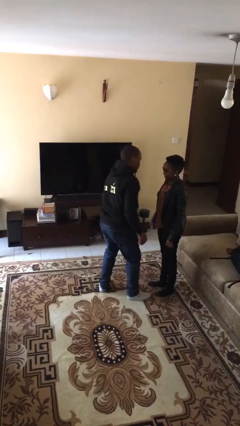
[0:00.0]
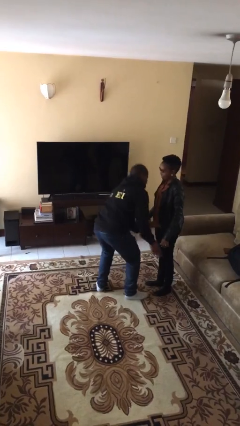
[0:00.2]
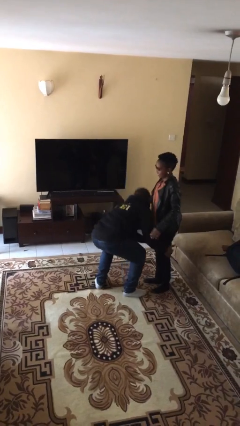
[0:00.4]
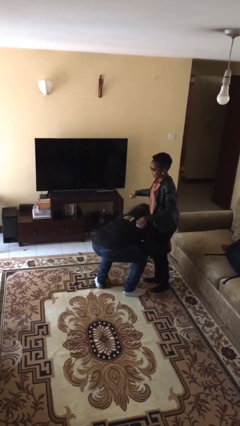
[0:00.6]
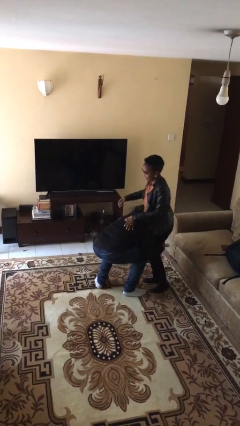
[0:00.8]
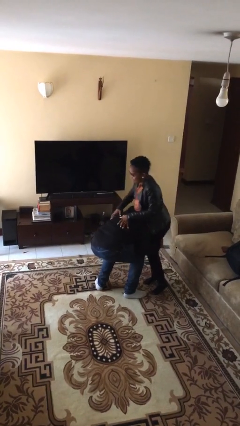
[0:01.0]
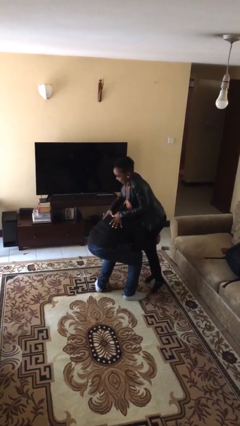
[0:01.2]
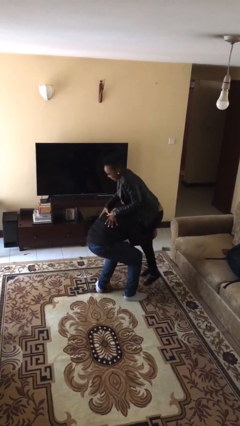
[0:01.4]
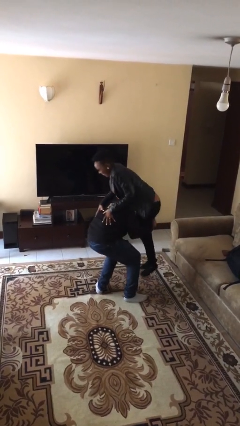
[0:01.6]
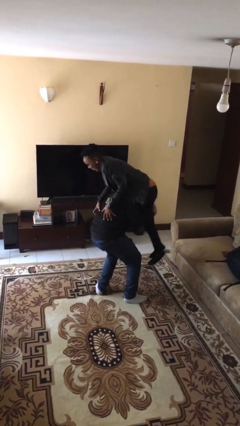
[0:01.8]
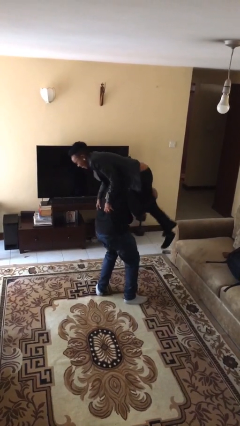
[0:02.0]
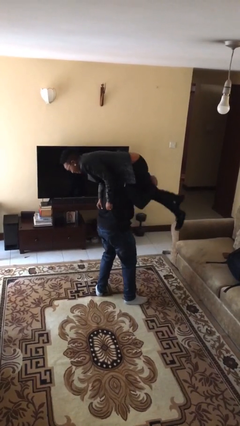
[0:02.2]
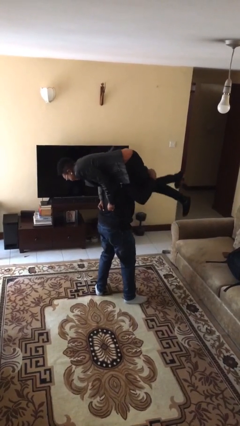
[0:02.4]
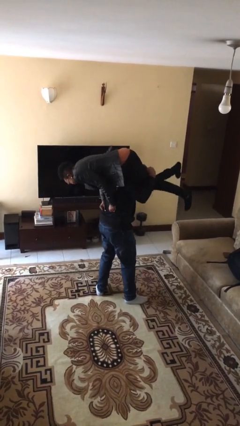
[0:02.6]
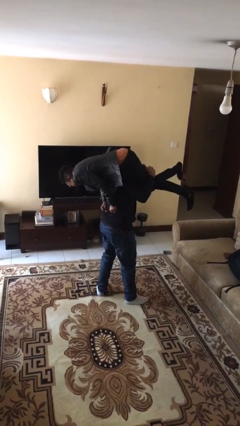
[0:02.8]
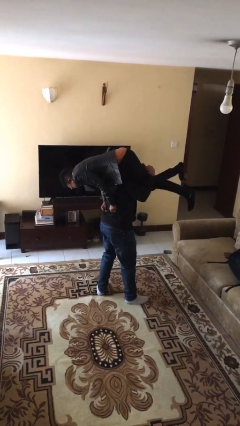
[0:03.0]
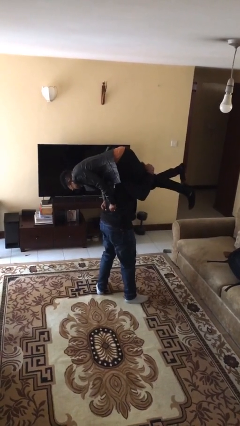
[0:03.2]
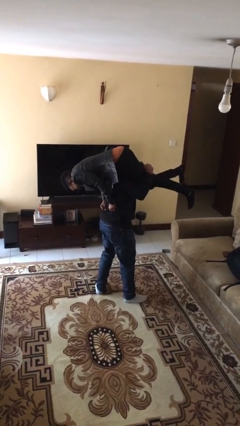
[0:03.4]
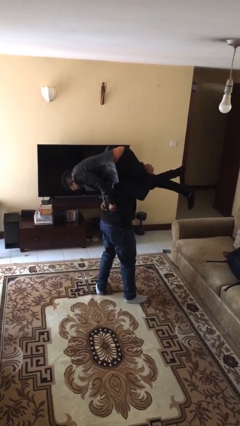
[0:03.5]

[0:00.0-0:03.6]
person carries person over shoulder

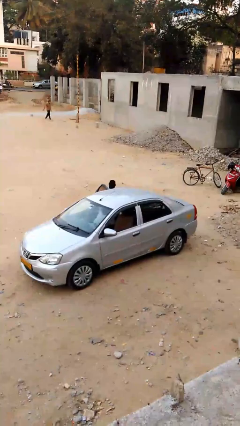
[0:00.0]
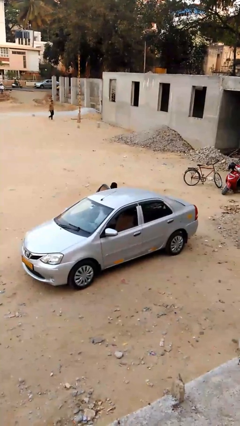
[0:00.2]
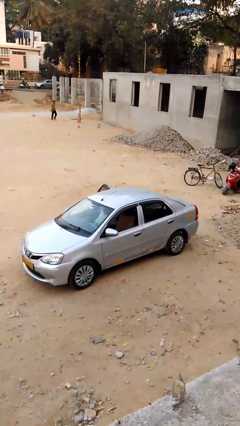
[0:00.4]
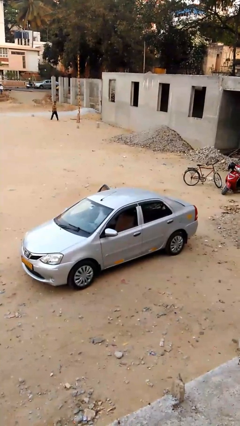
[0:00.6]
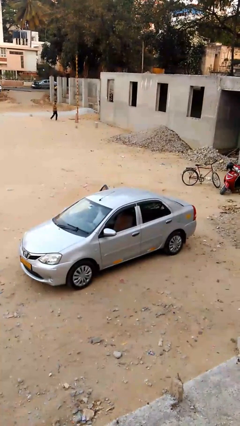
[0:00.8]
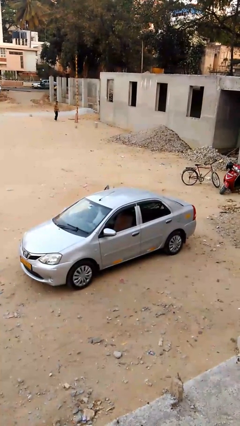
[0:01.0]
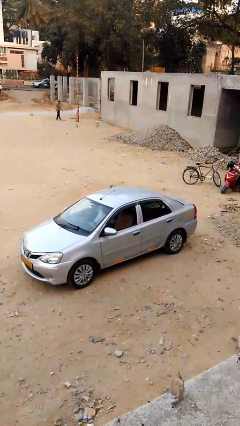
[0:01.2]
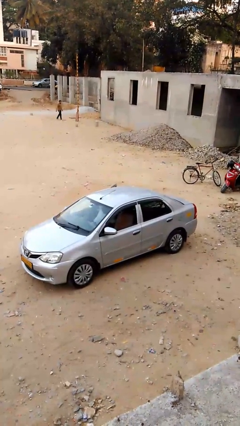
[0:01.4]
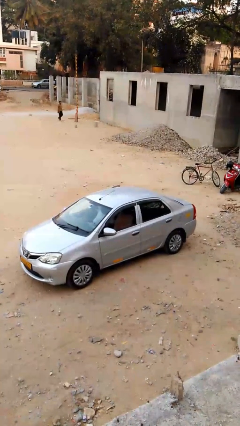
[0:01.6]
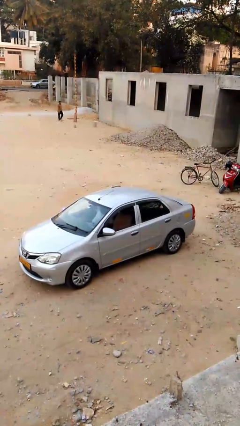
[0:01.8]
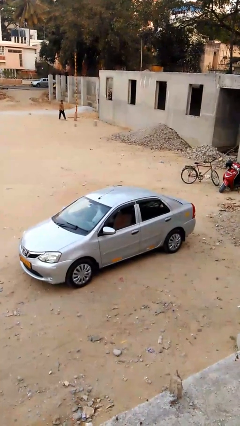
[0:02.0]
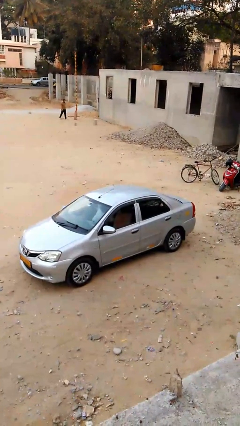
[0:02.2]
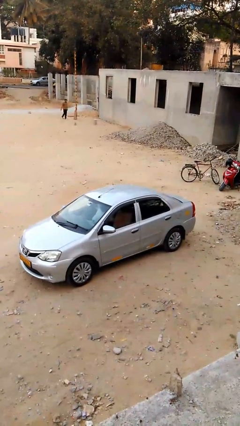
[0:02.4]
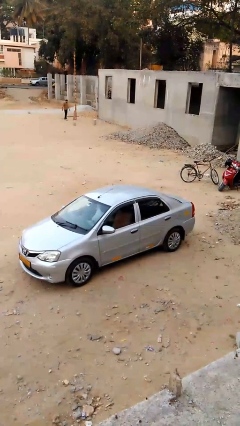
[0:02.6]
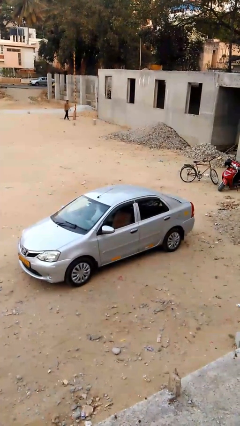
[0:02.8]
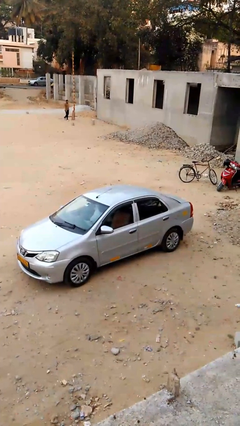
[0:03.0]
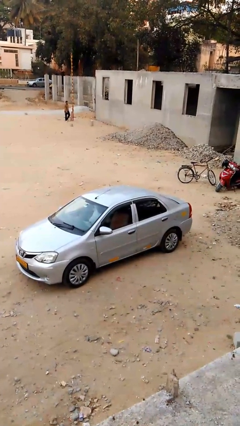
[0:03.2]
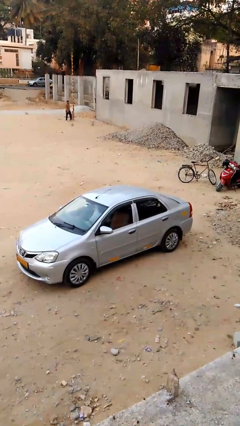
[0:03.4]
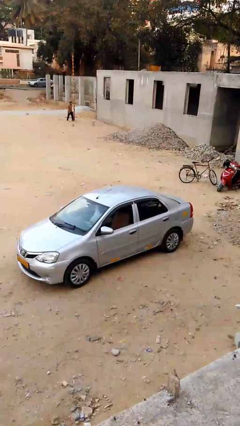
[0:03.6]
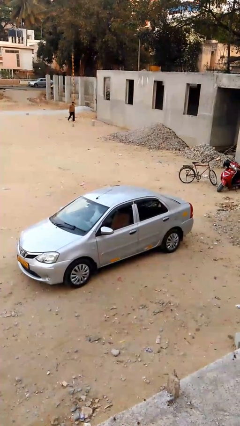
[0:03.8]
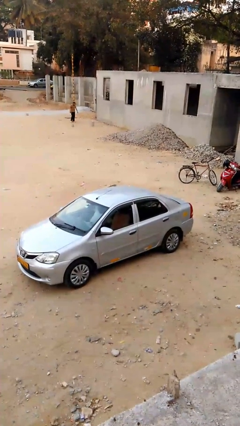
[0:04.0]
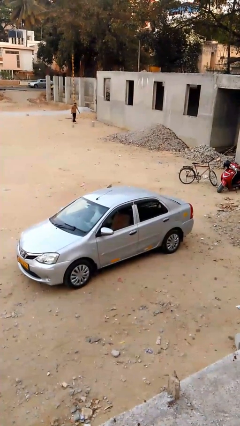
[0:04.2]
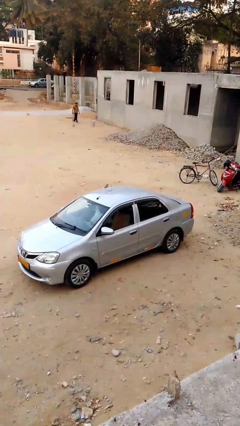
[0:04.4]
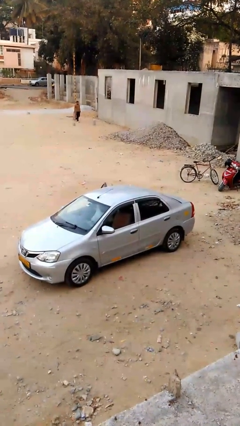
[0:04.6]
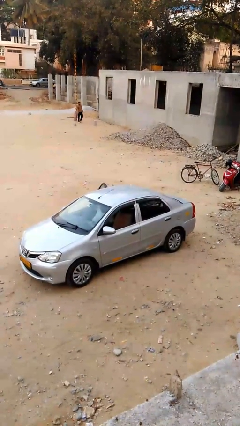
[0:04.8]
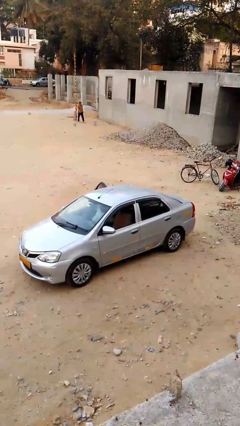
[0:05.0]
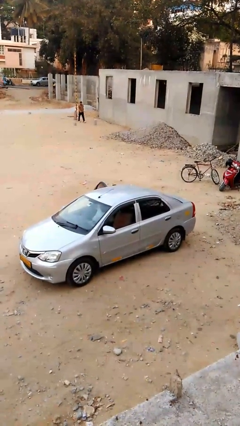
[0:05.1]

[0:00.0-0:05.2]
person enters car

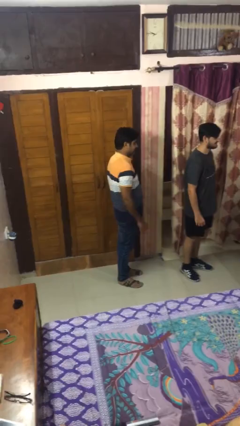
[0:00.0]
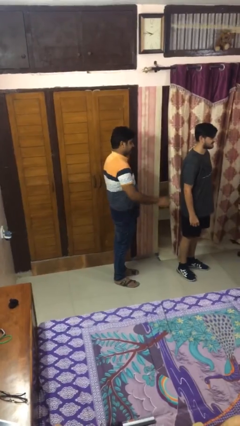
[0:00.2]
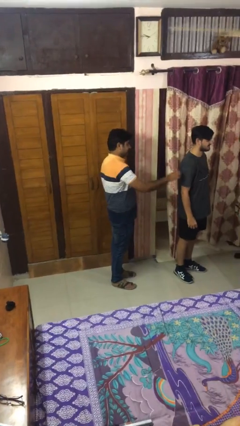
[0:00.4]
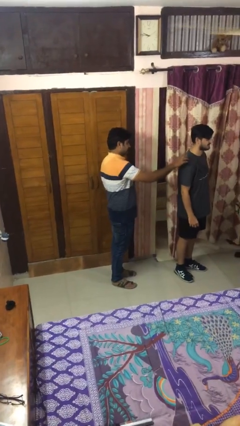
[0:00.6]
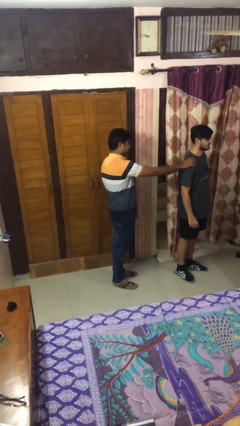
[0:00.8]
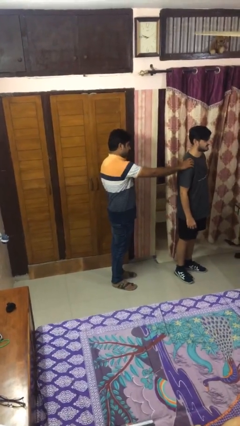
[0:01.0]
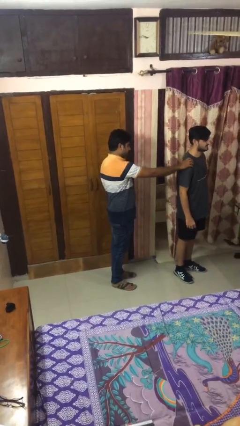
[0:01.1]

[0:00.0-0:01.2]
person grabs person by shoulder

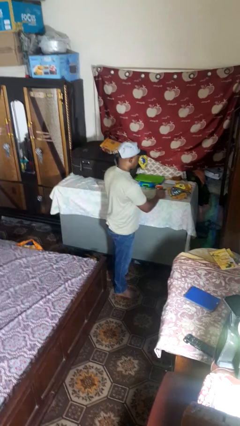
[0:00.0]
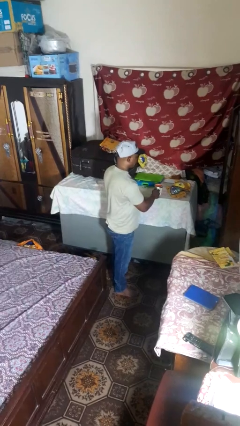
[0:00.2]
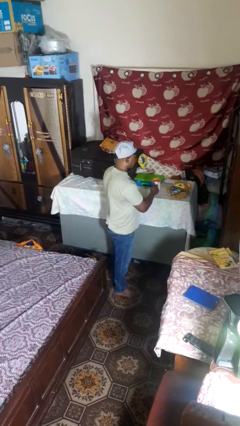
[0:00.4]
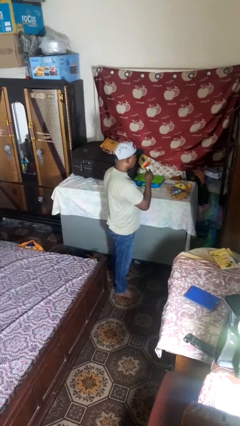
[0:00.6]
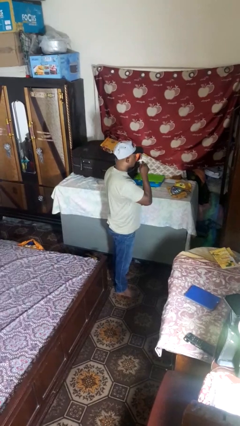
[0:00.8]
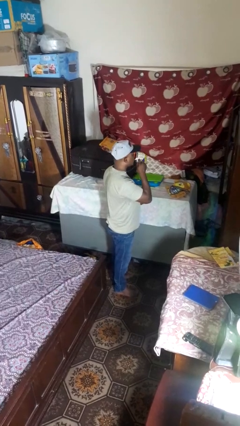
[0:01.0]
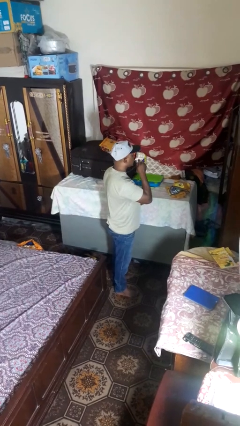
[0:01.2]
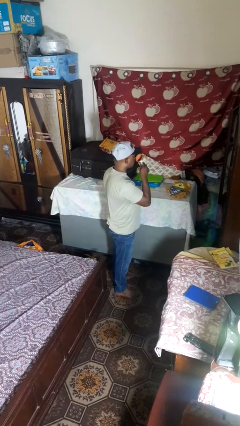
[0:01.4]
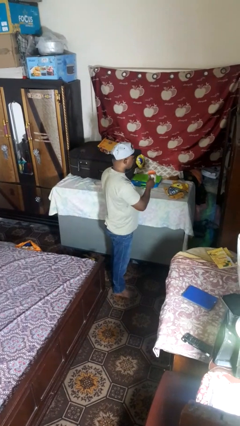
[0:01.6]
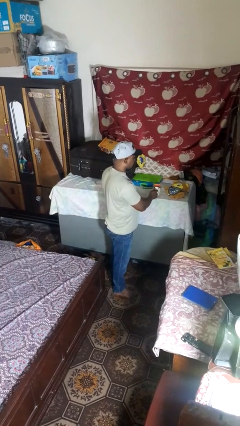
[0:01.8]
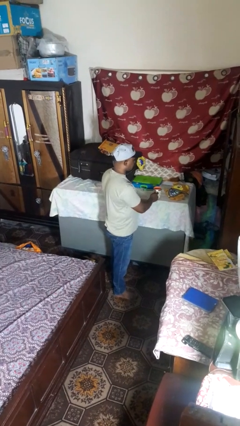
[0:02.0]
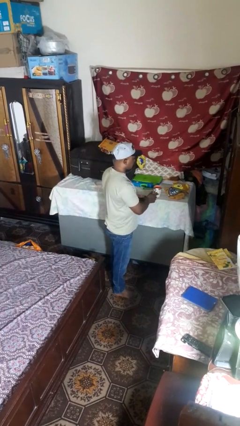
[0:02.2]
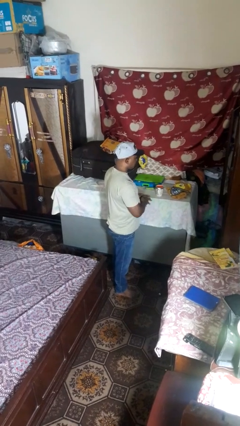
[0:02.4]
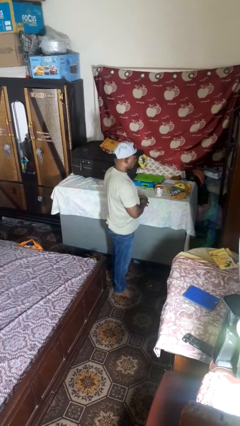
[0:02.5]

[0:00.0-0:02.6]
person drinks from cup

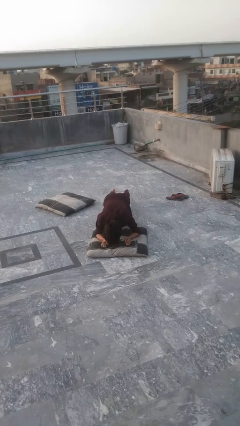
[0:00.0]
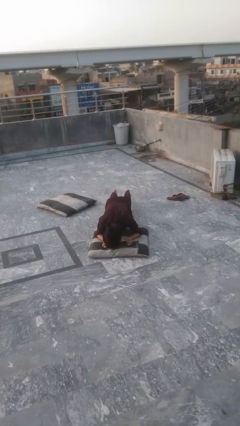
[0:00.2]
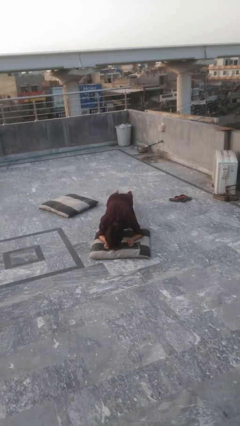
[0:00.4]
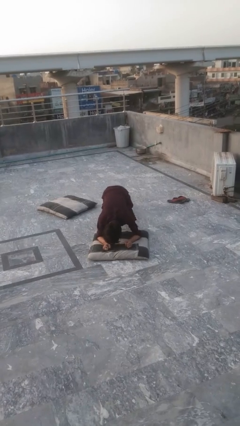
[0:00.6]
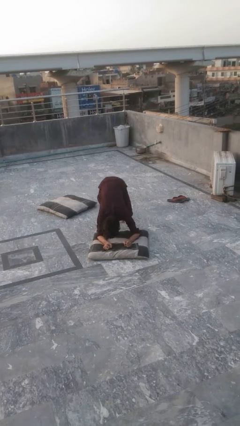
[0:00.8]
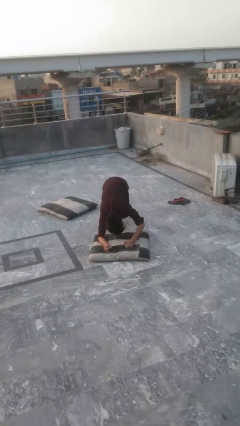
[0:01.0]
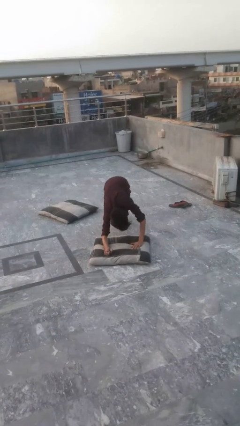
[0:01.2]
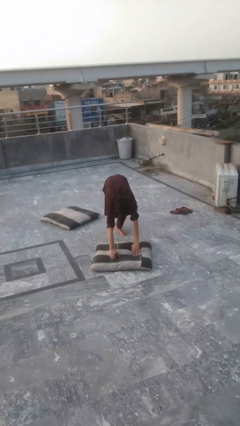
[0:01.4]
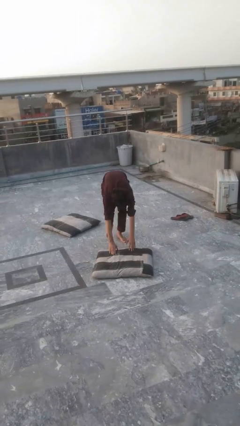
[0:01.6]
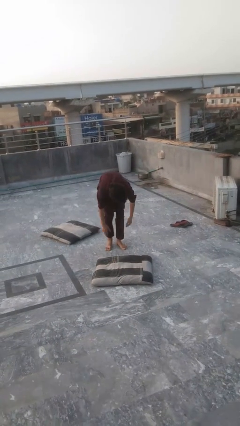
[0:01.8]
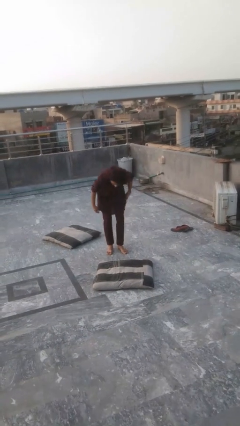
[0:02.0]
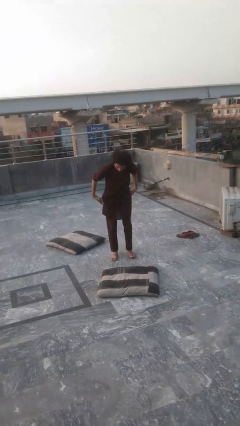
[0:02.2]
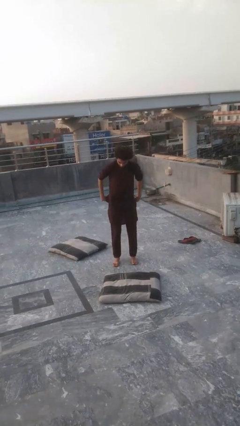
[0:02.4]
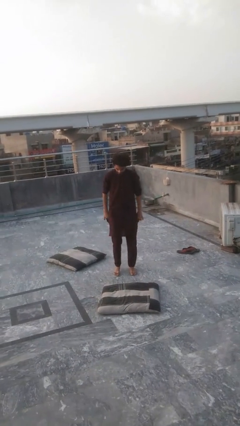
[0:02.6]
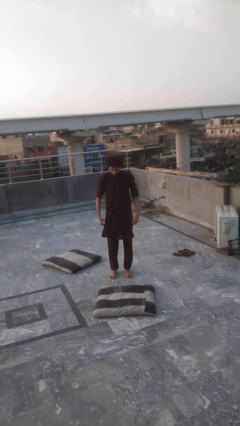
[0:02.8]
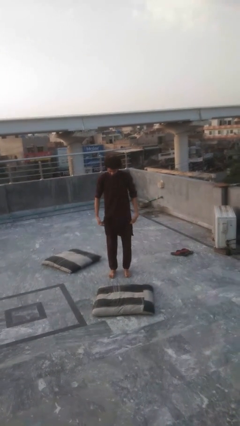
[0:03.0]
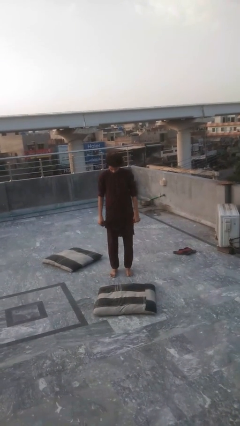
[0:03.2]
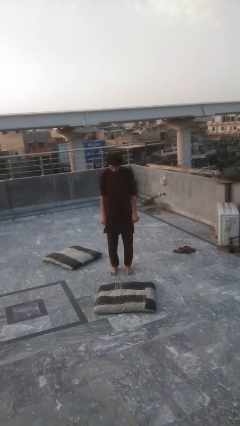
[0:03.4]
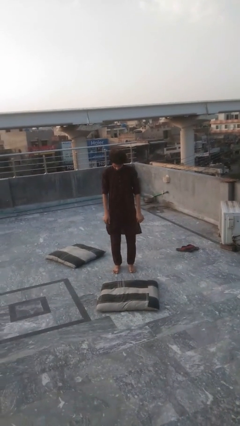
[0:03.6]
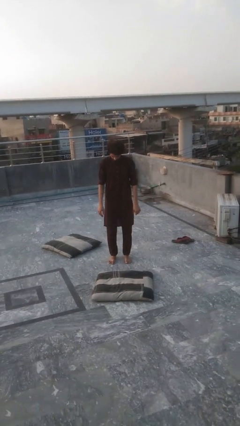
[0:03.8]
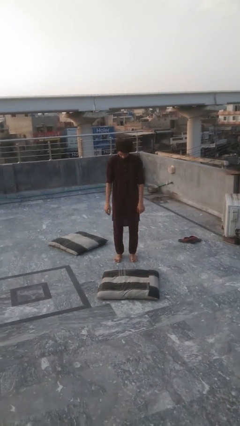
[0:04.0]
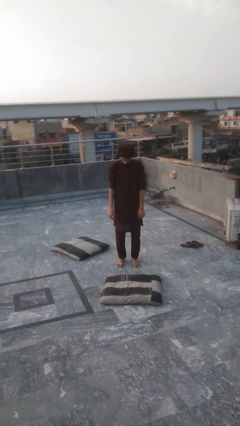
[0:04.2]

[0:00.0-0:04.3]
person stands up from floor

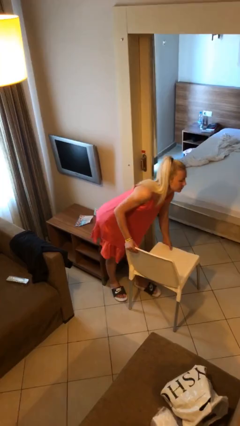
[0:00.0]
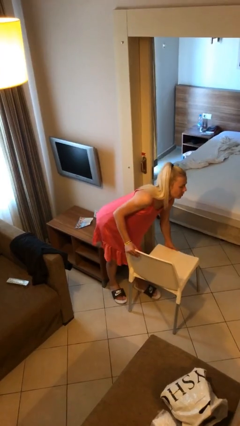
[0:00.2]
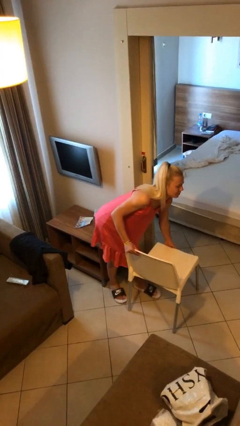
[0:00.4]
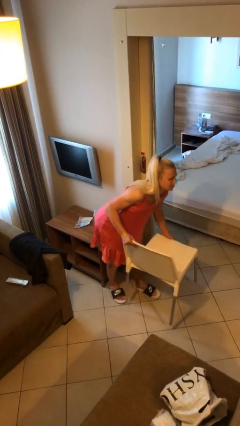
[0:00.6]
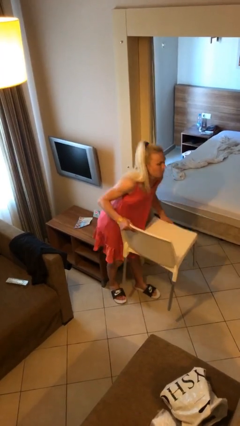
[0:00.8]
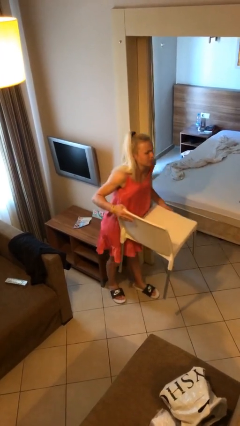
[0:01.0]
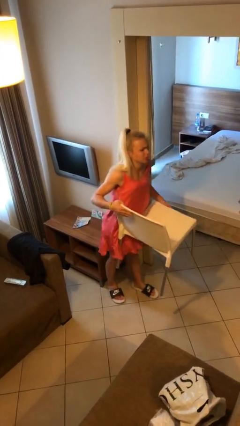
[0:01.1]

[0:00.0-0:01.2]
person picks up object from floor
